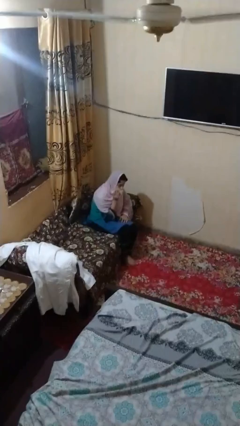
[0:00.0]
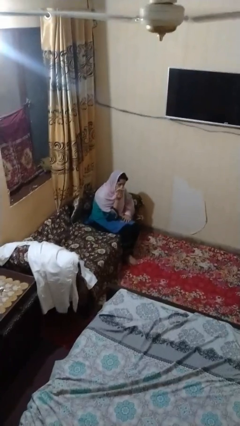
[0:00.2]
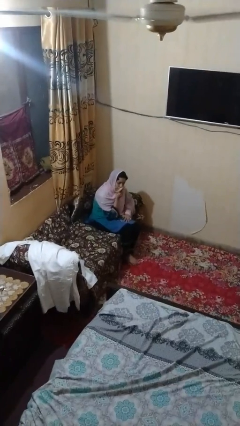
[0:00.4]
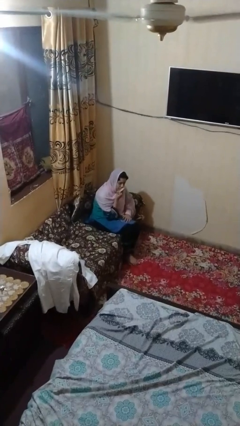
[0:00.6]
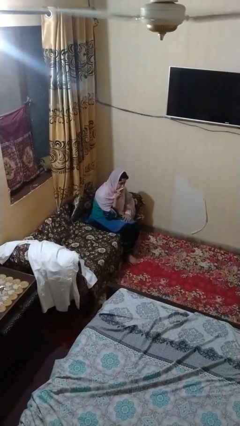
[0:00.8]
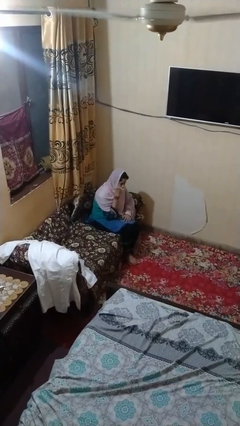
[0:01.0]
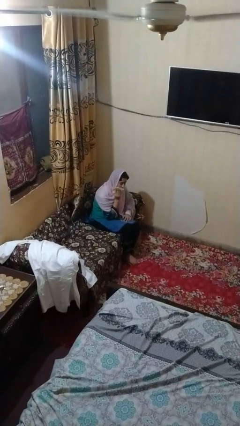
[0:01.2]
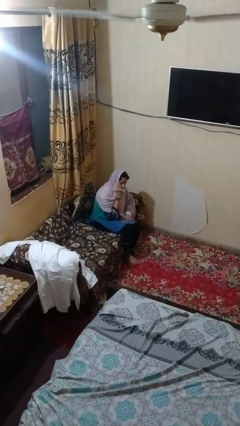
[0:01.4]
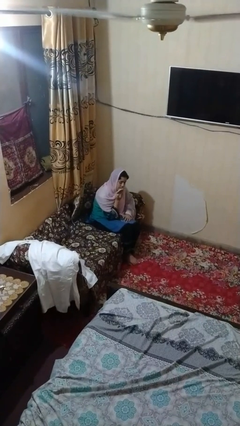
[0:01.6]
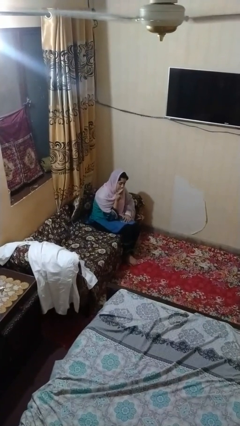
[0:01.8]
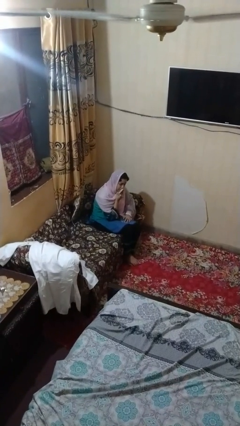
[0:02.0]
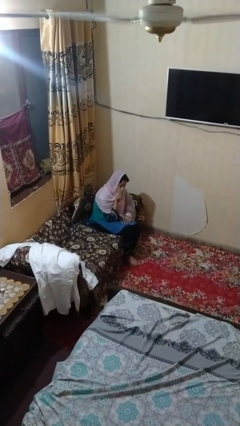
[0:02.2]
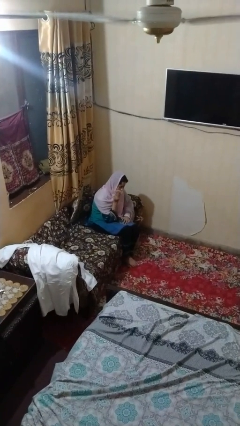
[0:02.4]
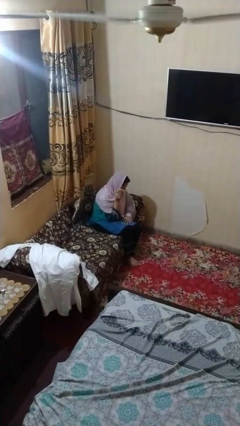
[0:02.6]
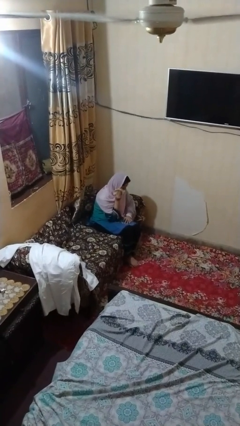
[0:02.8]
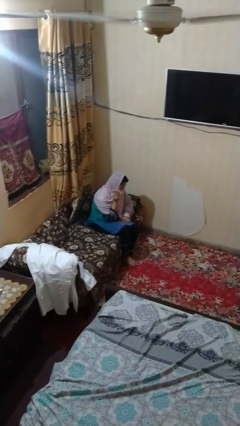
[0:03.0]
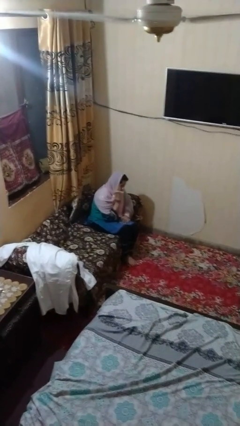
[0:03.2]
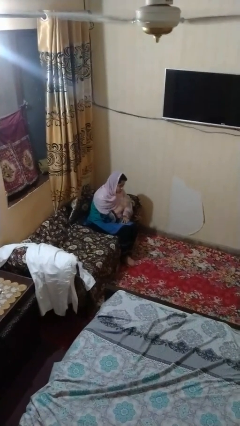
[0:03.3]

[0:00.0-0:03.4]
person wipes mouth with napkin

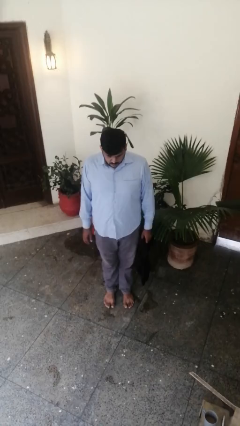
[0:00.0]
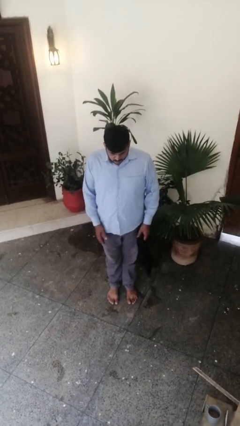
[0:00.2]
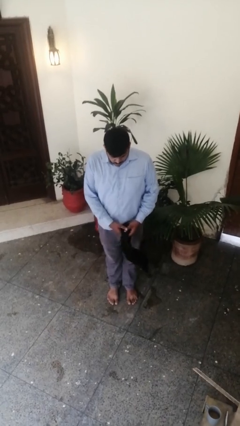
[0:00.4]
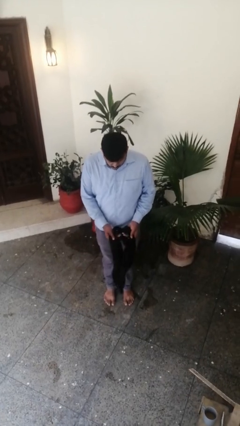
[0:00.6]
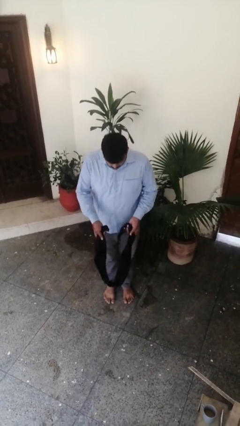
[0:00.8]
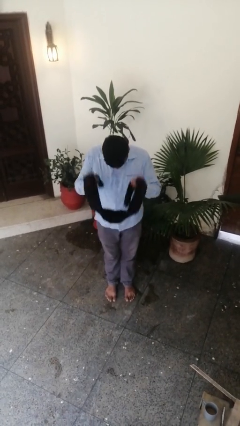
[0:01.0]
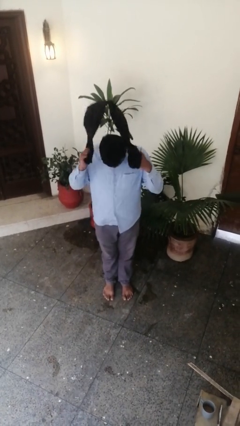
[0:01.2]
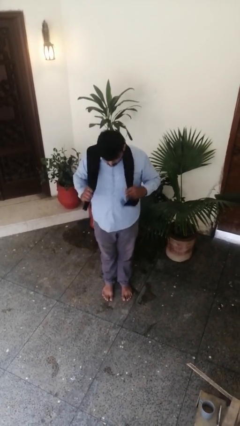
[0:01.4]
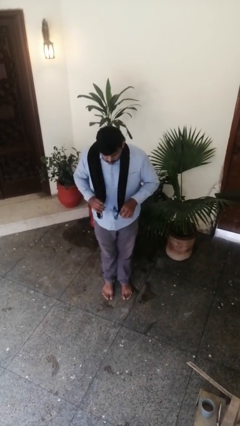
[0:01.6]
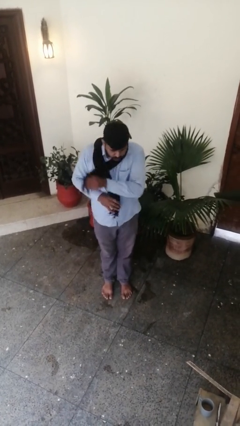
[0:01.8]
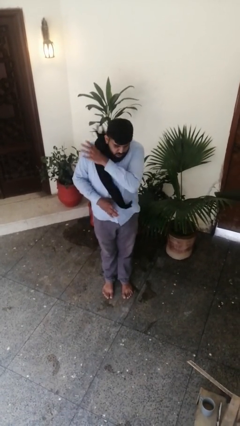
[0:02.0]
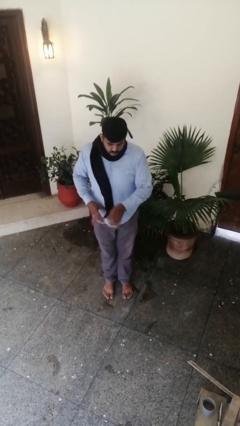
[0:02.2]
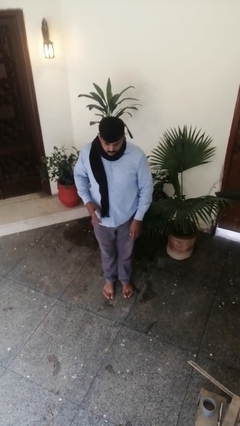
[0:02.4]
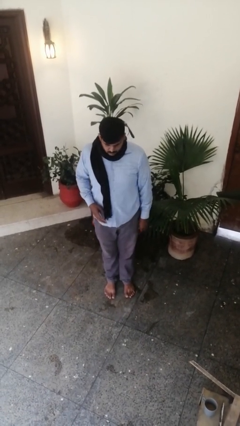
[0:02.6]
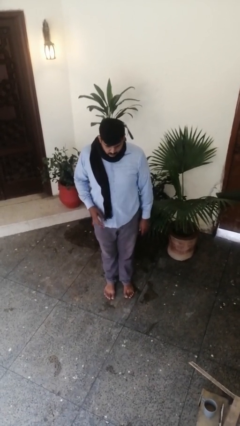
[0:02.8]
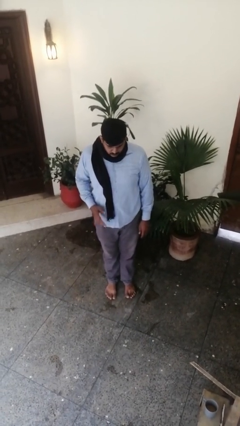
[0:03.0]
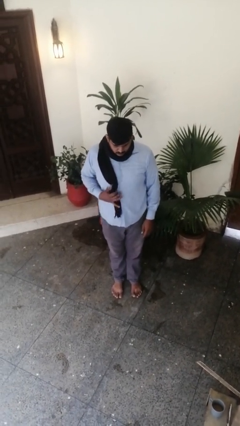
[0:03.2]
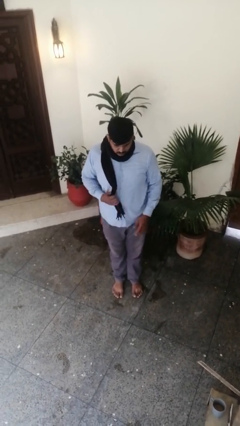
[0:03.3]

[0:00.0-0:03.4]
person puts on scarf

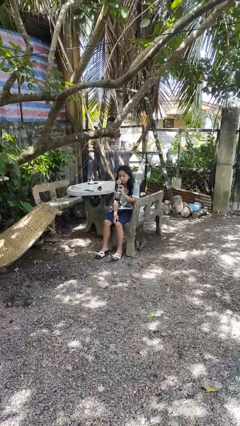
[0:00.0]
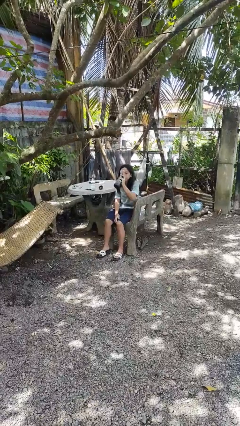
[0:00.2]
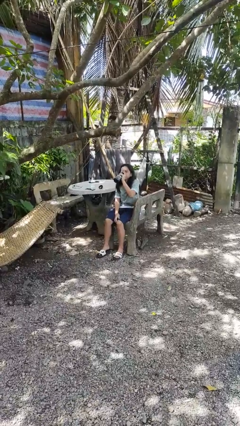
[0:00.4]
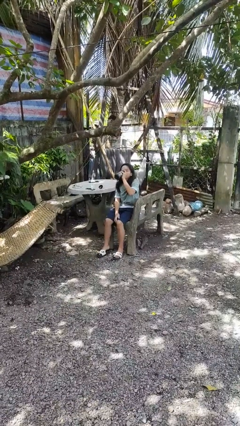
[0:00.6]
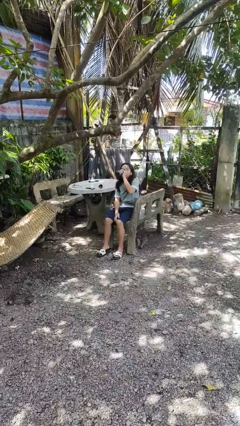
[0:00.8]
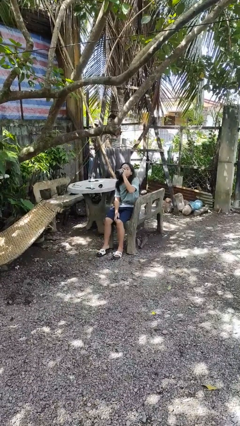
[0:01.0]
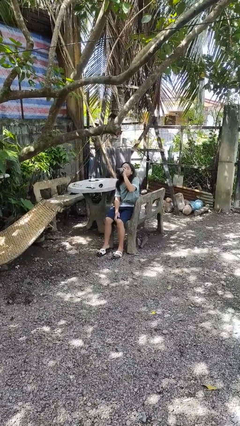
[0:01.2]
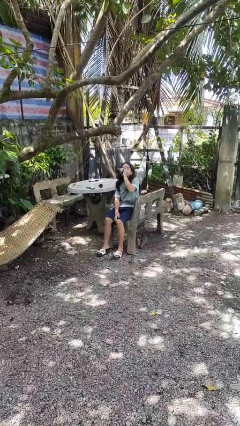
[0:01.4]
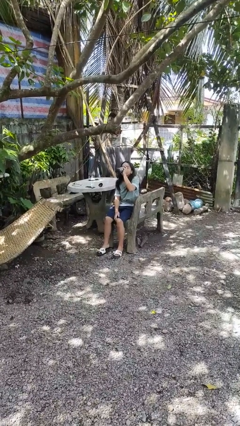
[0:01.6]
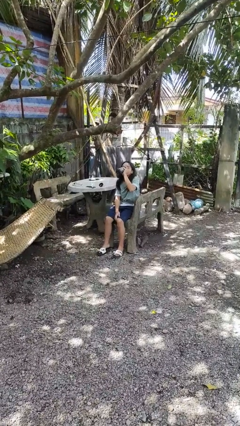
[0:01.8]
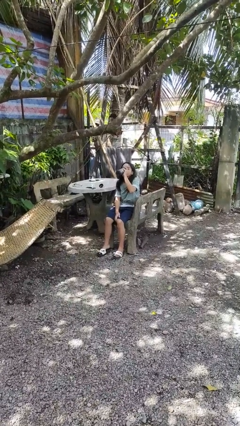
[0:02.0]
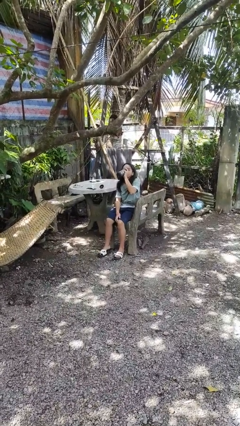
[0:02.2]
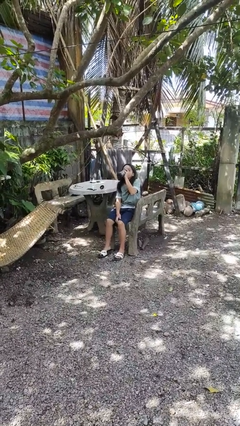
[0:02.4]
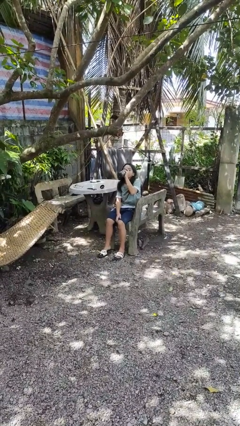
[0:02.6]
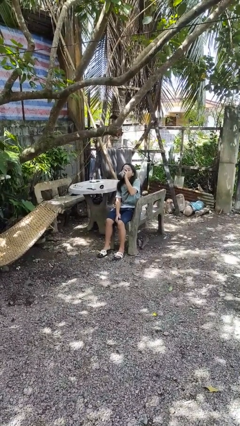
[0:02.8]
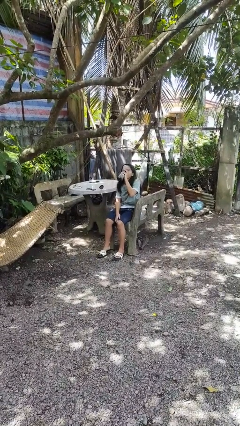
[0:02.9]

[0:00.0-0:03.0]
person drinks from bottle

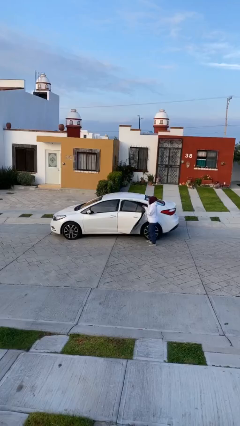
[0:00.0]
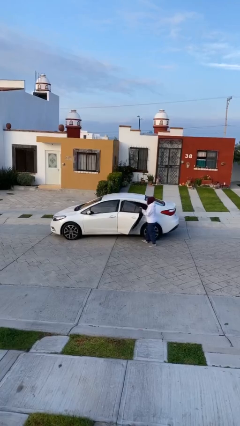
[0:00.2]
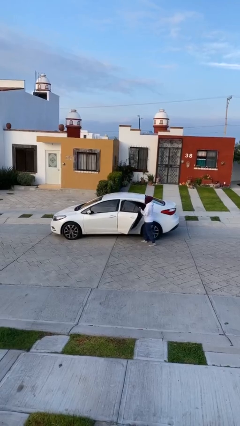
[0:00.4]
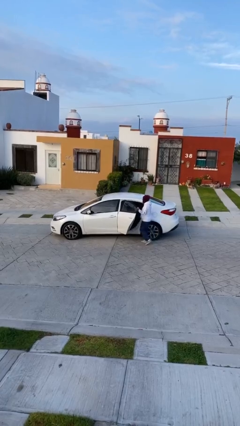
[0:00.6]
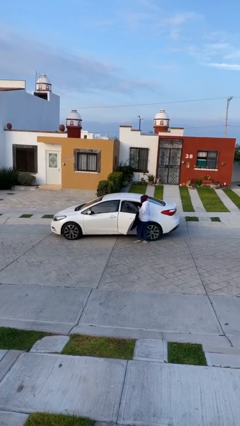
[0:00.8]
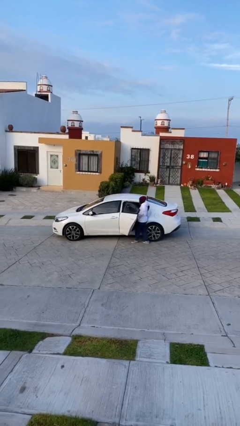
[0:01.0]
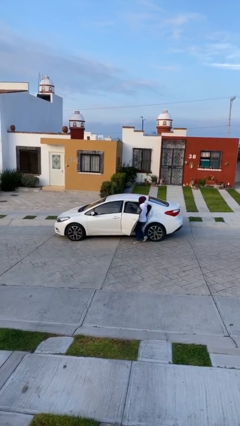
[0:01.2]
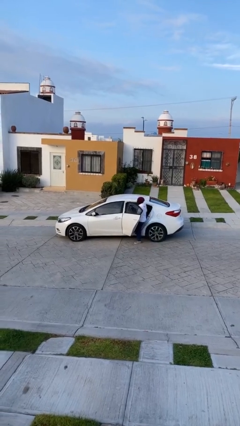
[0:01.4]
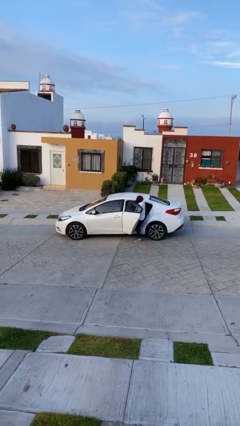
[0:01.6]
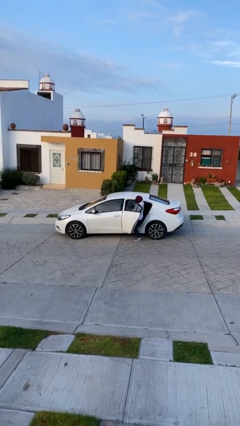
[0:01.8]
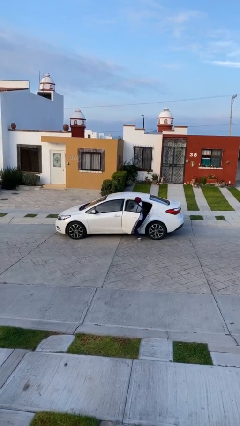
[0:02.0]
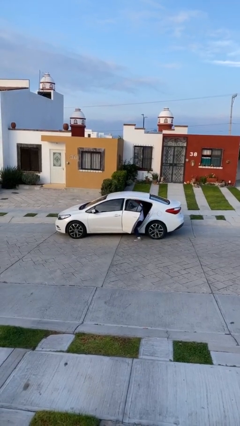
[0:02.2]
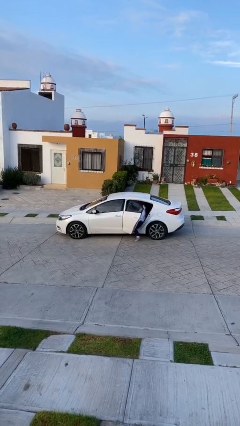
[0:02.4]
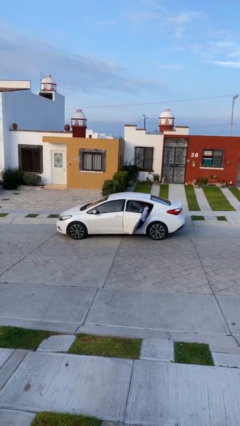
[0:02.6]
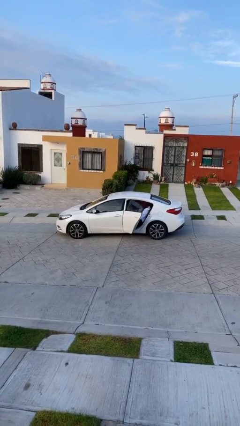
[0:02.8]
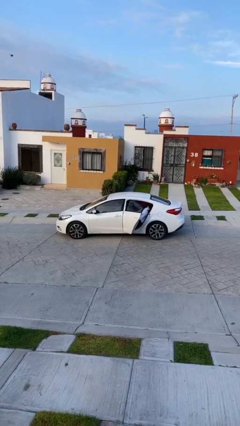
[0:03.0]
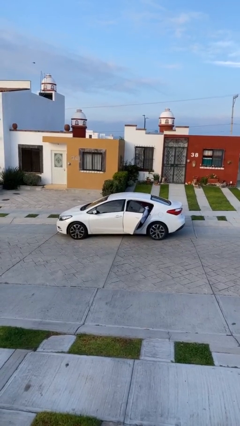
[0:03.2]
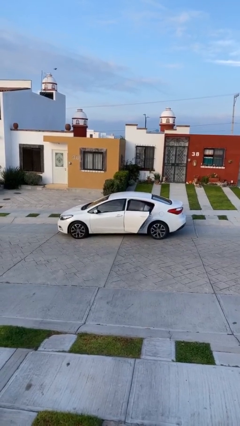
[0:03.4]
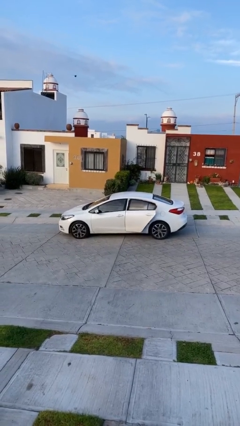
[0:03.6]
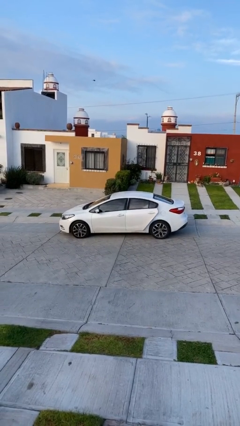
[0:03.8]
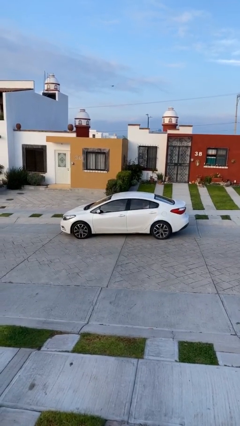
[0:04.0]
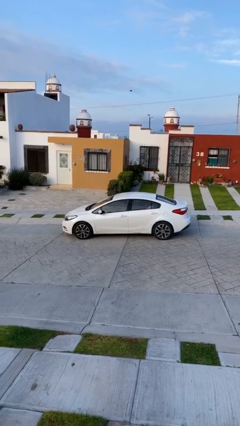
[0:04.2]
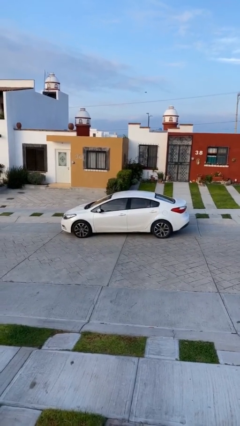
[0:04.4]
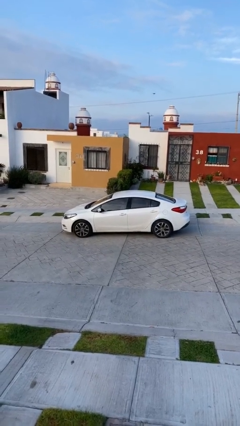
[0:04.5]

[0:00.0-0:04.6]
car picks up person

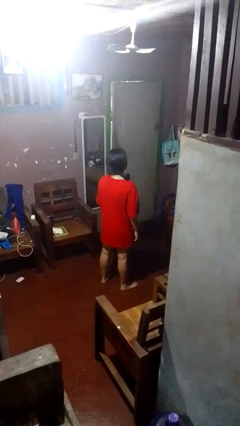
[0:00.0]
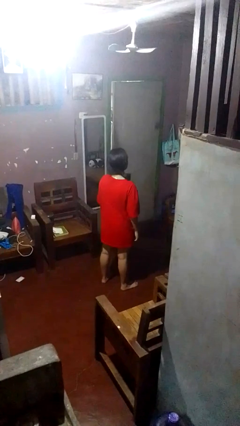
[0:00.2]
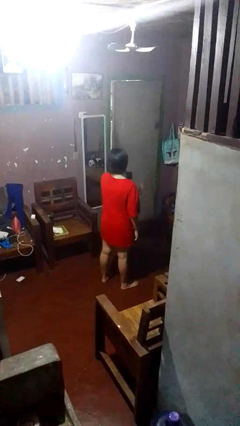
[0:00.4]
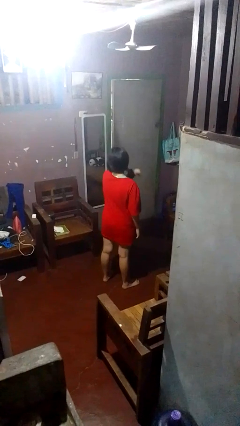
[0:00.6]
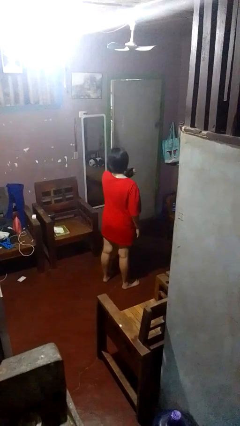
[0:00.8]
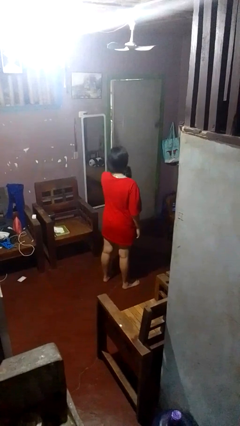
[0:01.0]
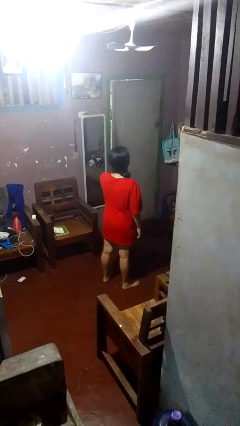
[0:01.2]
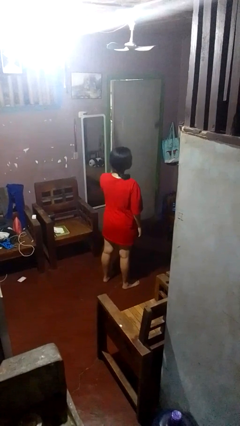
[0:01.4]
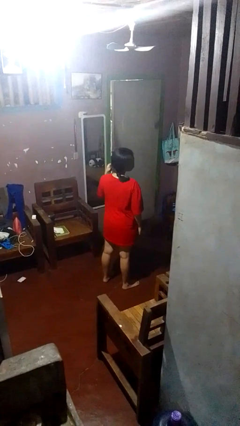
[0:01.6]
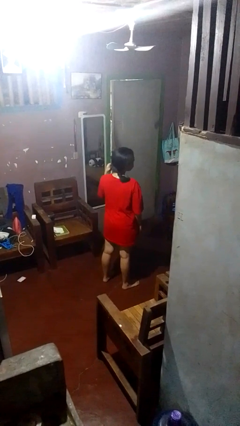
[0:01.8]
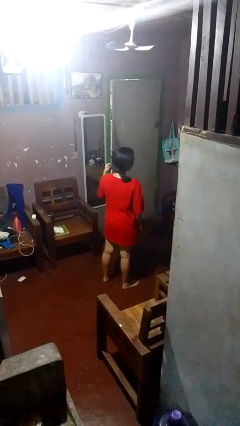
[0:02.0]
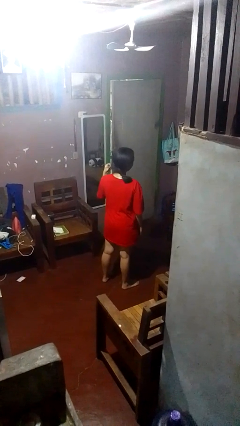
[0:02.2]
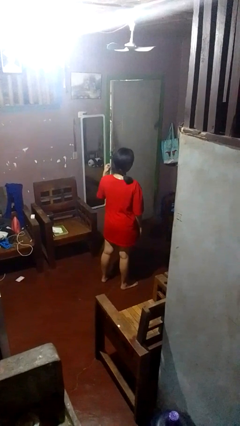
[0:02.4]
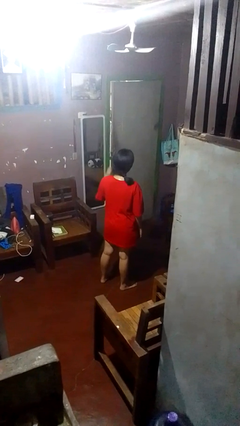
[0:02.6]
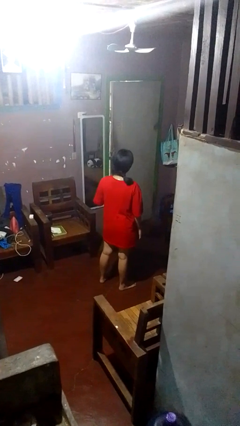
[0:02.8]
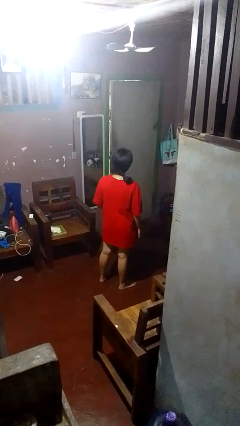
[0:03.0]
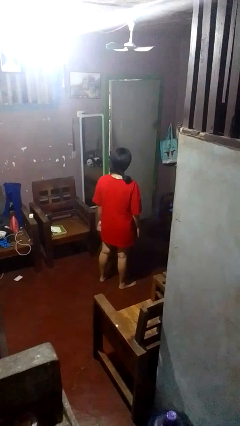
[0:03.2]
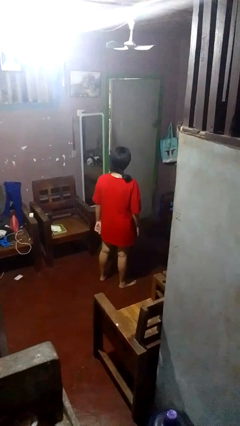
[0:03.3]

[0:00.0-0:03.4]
person gestures cut
